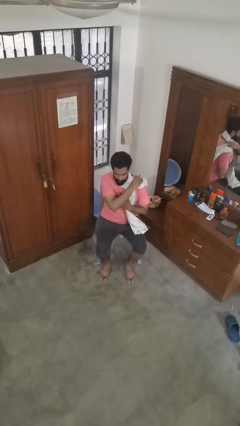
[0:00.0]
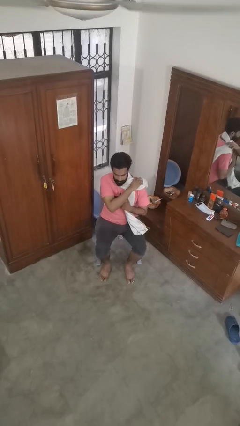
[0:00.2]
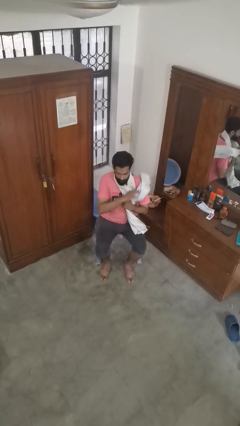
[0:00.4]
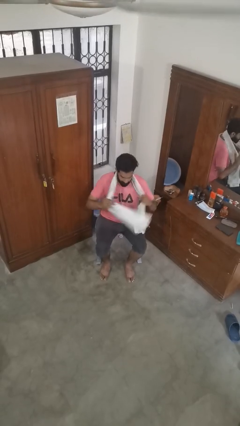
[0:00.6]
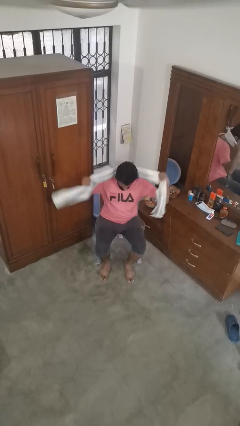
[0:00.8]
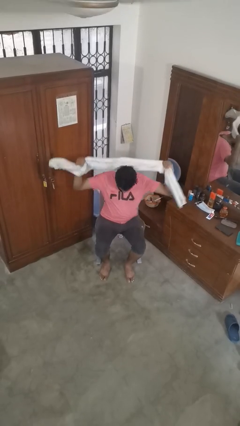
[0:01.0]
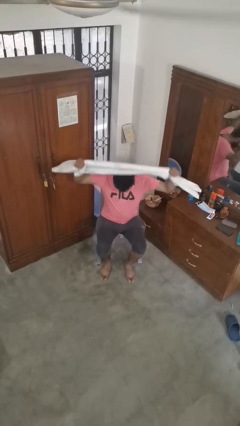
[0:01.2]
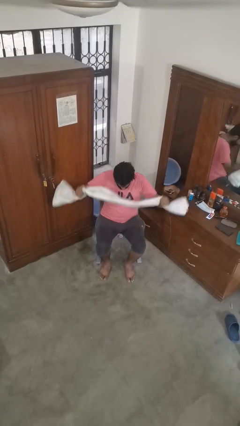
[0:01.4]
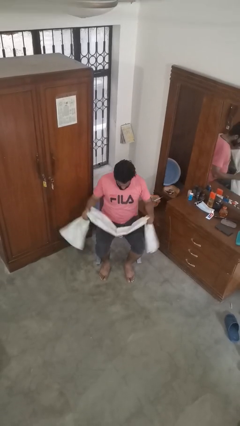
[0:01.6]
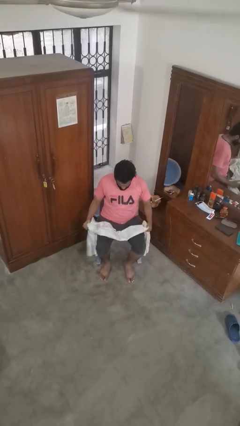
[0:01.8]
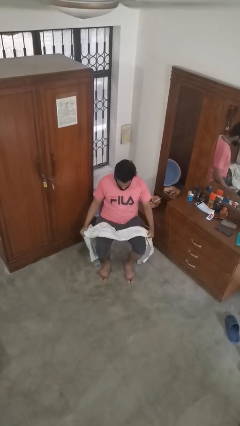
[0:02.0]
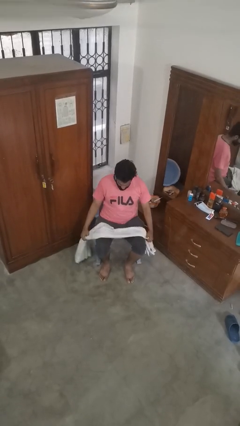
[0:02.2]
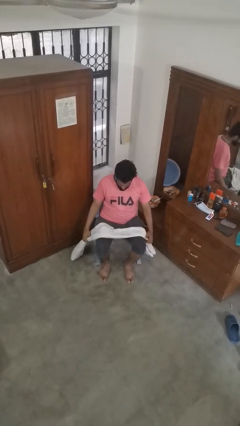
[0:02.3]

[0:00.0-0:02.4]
person takes off scarf

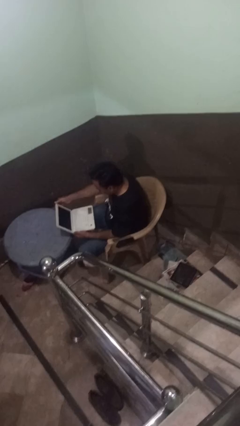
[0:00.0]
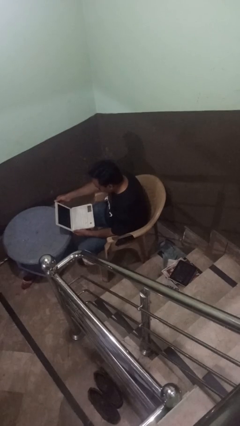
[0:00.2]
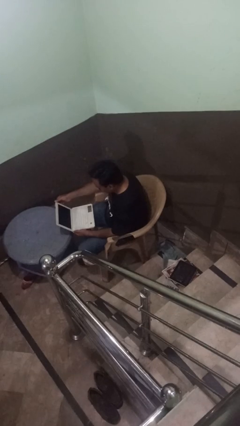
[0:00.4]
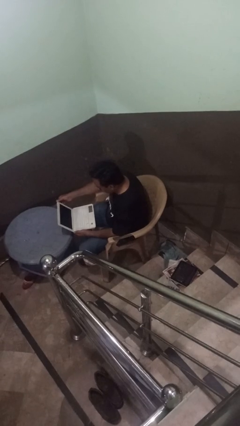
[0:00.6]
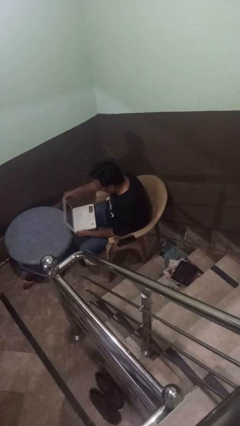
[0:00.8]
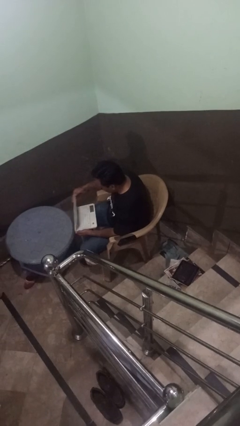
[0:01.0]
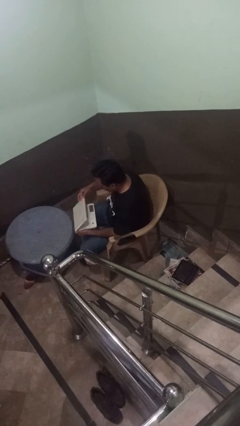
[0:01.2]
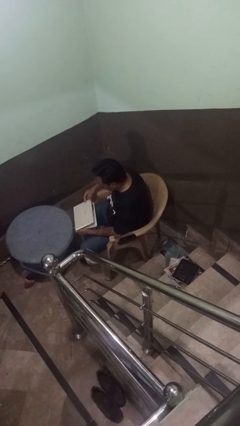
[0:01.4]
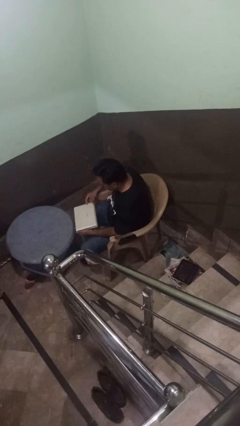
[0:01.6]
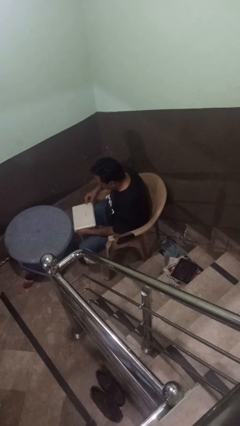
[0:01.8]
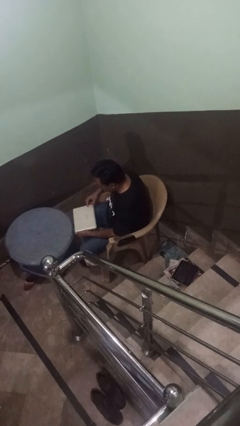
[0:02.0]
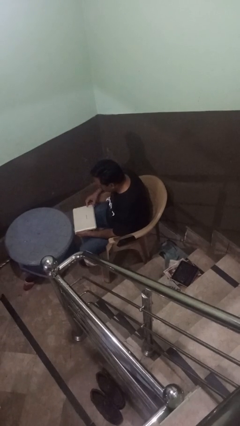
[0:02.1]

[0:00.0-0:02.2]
person closes laptop

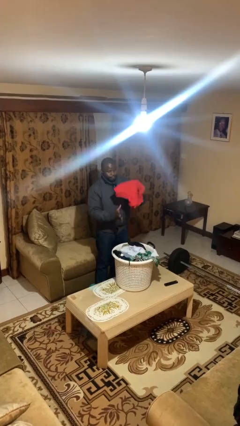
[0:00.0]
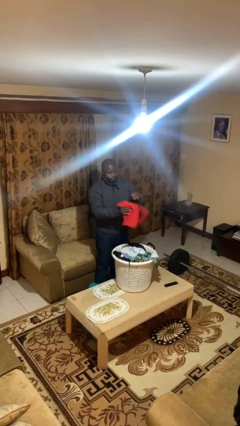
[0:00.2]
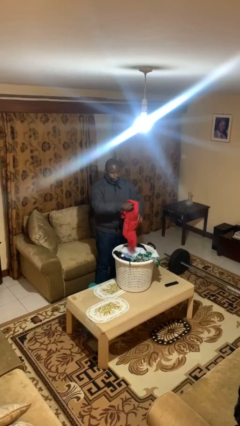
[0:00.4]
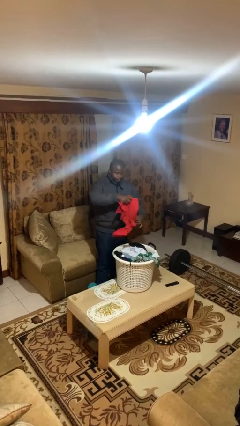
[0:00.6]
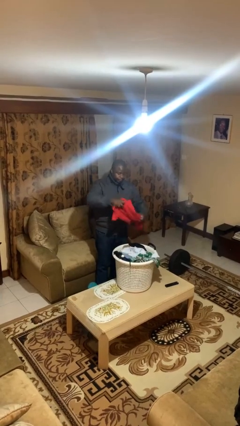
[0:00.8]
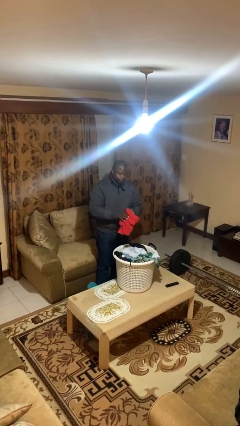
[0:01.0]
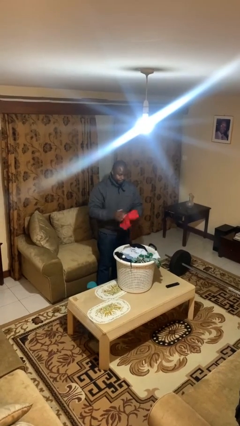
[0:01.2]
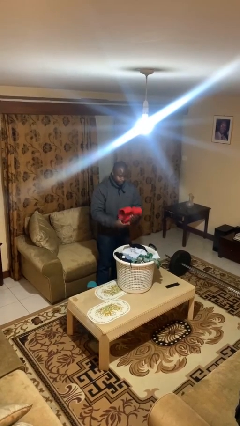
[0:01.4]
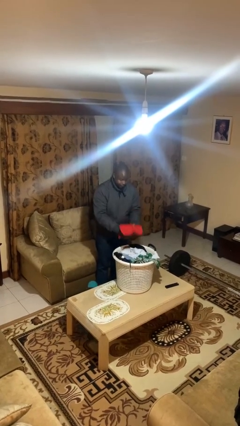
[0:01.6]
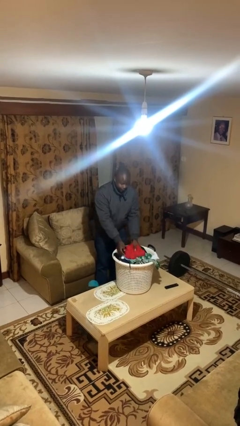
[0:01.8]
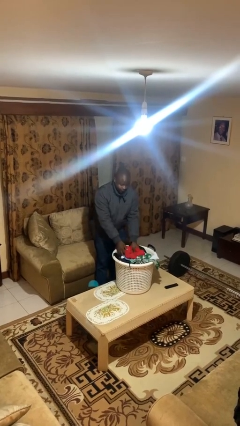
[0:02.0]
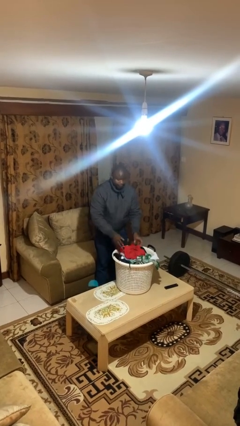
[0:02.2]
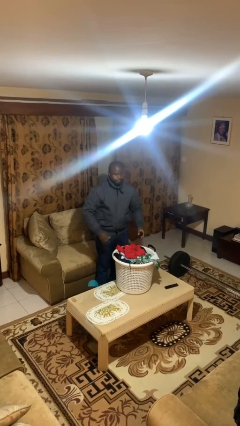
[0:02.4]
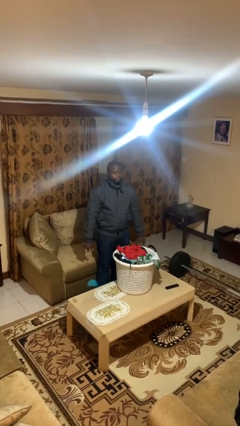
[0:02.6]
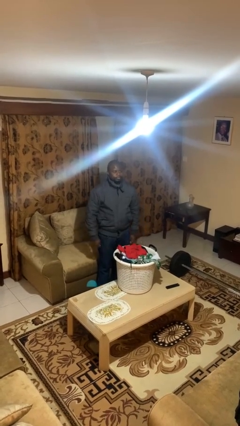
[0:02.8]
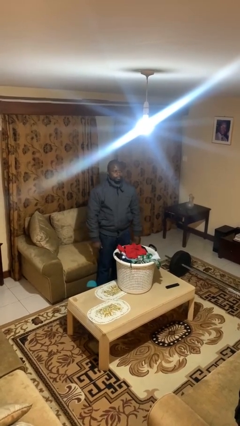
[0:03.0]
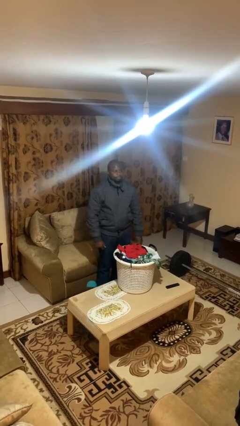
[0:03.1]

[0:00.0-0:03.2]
person folds shirt

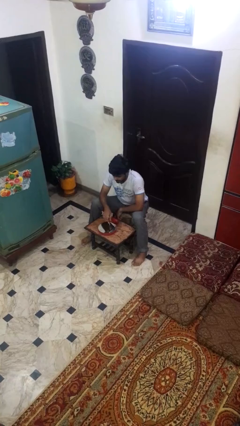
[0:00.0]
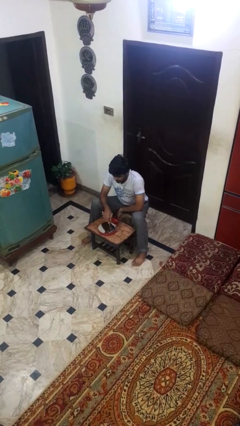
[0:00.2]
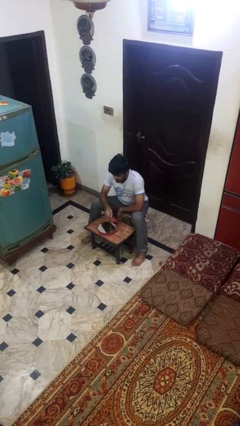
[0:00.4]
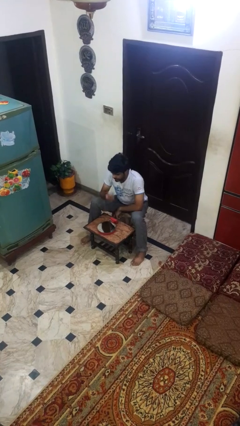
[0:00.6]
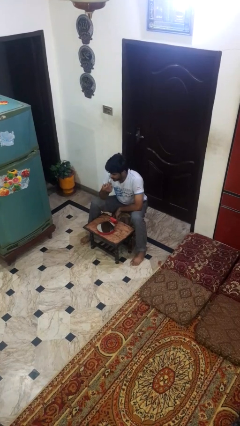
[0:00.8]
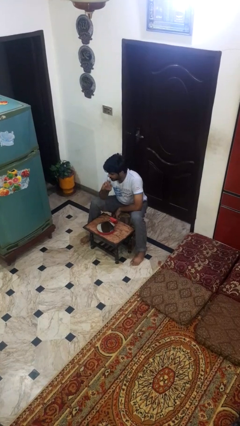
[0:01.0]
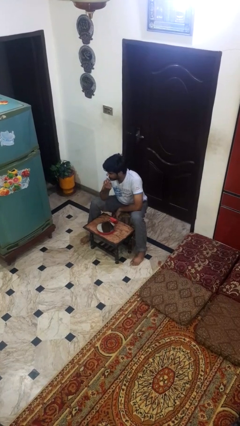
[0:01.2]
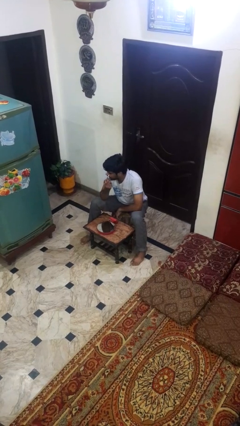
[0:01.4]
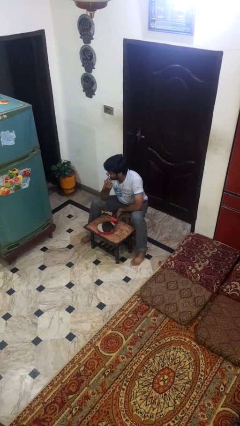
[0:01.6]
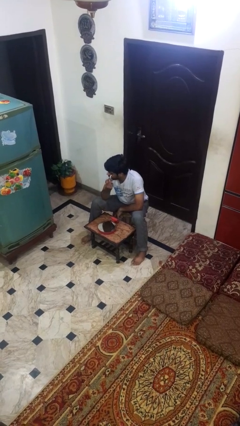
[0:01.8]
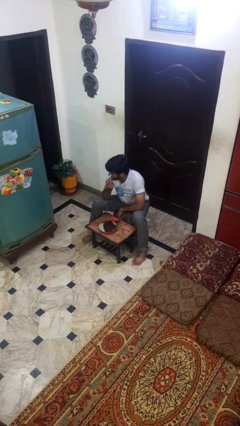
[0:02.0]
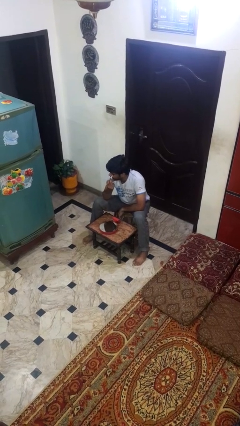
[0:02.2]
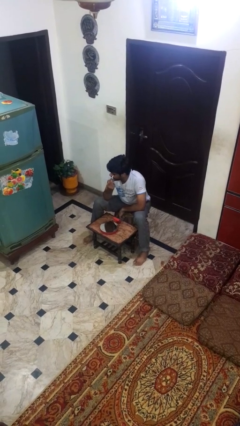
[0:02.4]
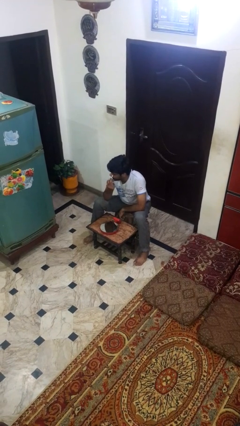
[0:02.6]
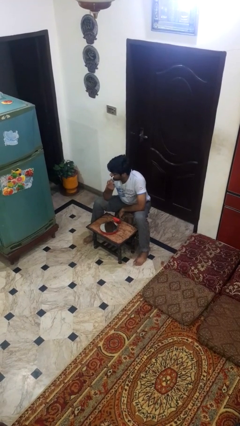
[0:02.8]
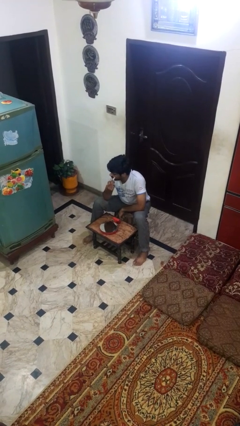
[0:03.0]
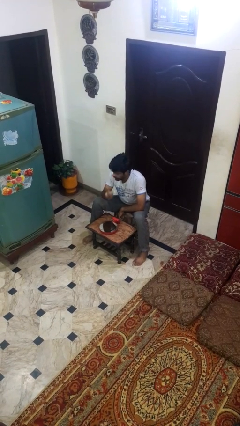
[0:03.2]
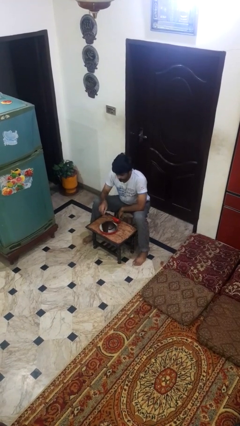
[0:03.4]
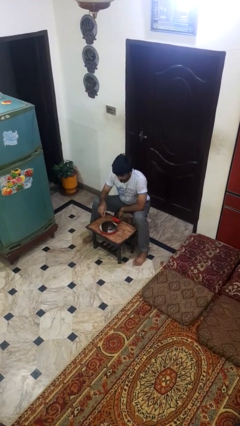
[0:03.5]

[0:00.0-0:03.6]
person applies eye makeup

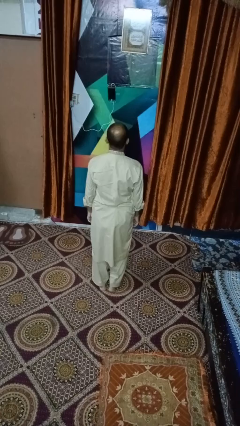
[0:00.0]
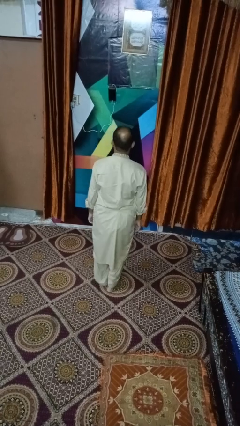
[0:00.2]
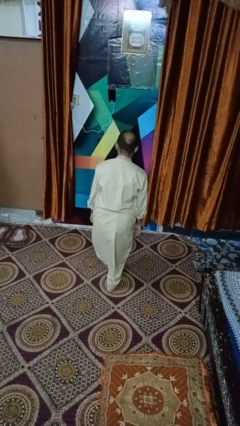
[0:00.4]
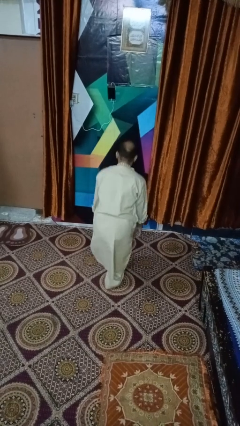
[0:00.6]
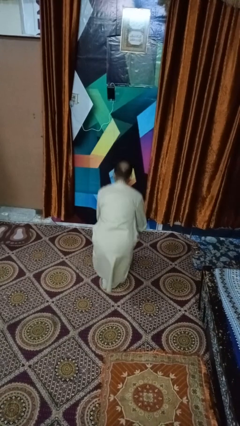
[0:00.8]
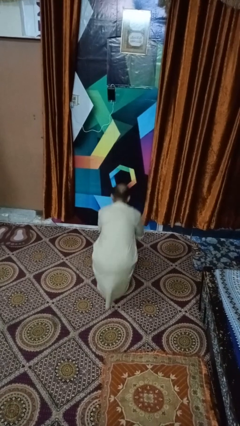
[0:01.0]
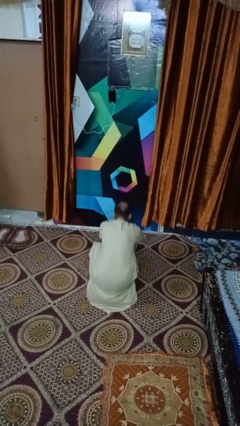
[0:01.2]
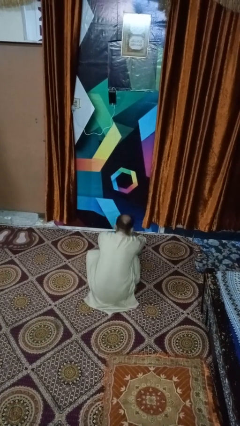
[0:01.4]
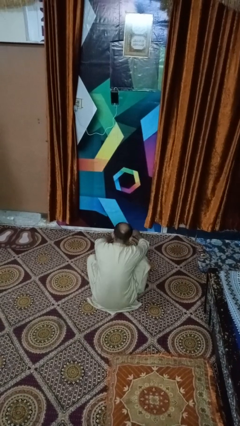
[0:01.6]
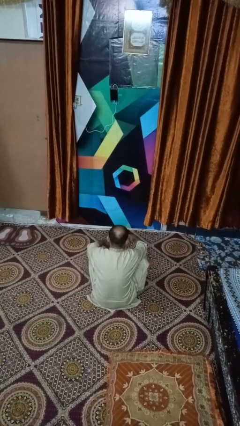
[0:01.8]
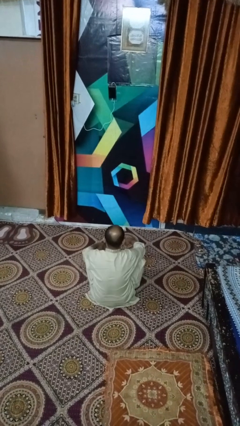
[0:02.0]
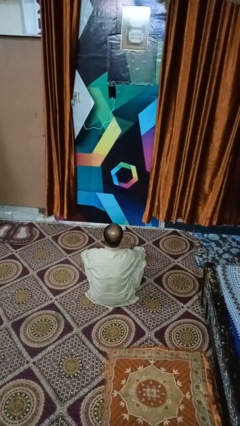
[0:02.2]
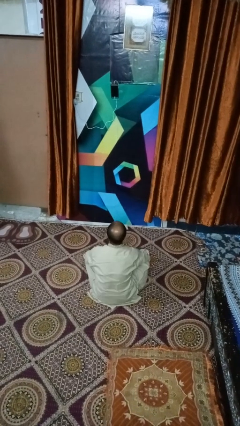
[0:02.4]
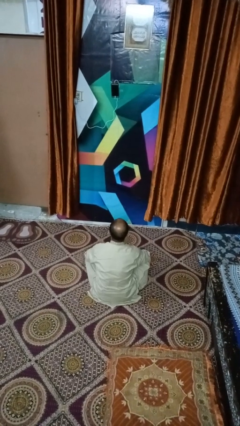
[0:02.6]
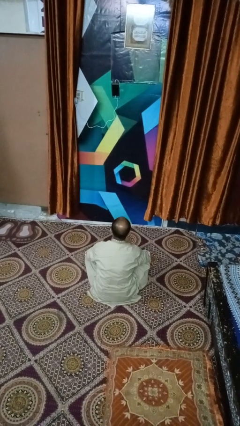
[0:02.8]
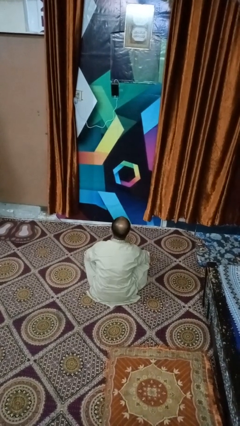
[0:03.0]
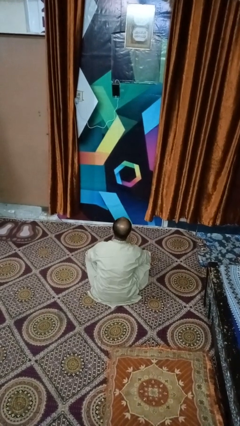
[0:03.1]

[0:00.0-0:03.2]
person sits crisscross

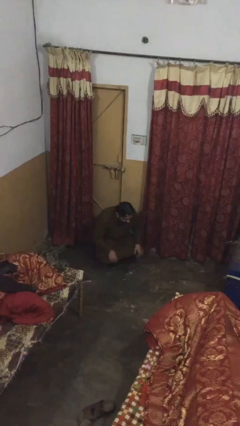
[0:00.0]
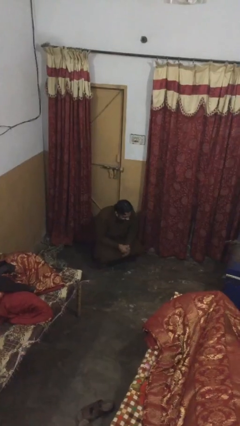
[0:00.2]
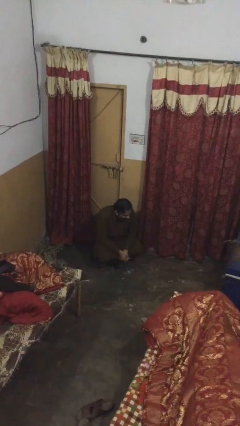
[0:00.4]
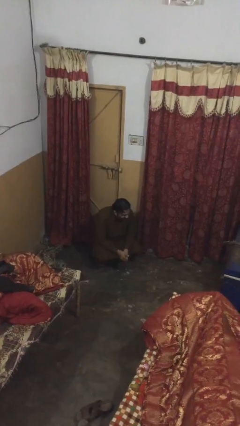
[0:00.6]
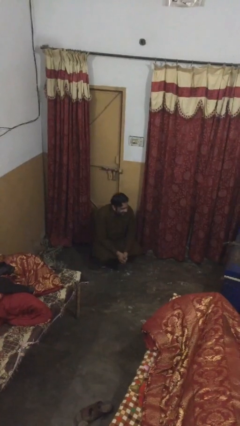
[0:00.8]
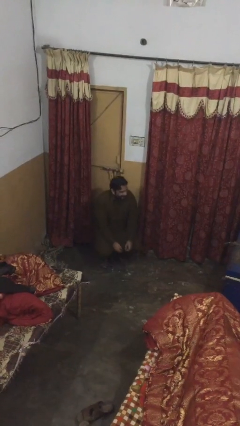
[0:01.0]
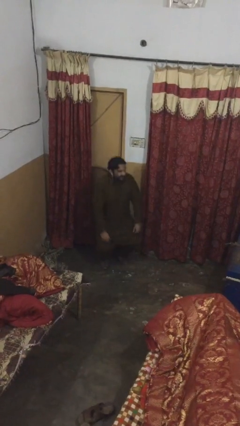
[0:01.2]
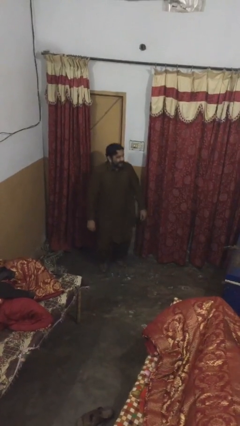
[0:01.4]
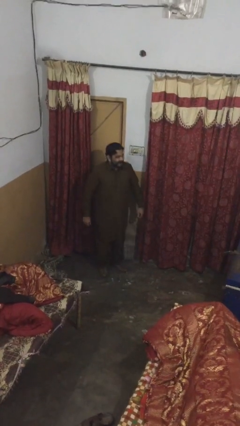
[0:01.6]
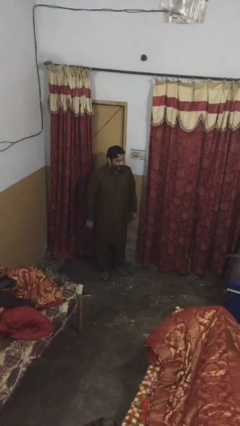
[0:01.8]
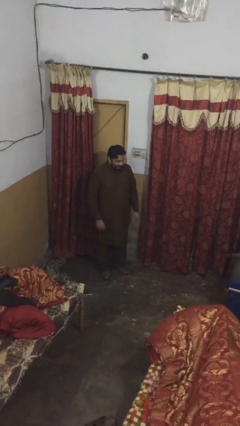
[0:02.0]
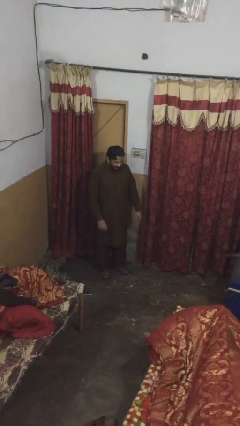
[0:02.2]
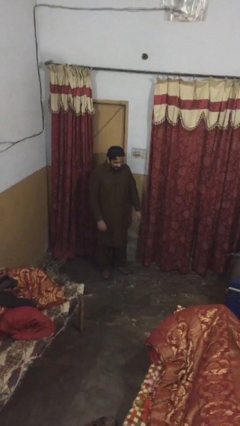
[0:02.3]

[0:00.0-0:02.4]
person stands up

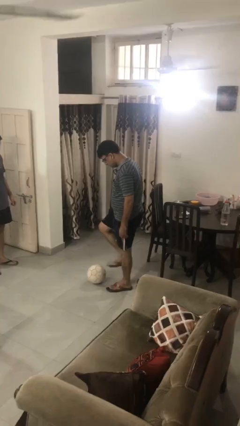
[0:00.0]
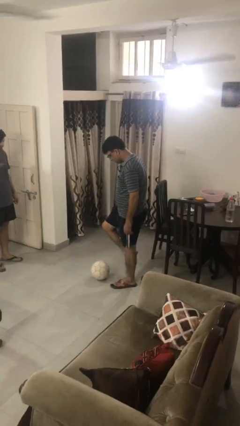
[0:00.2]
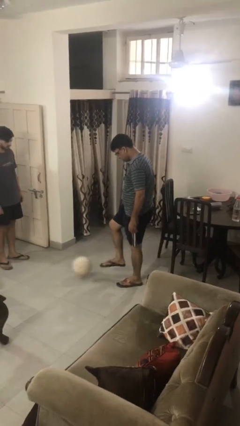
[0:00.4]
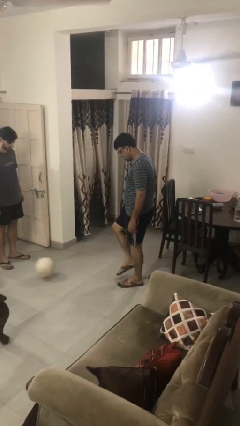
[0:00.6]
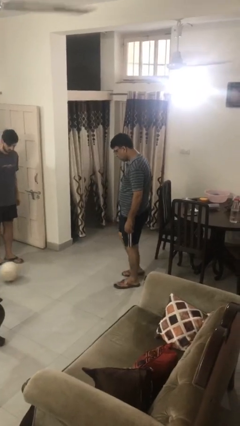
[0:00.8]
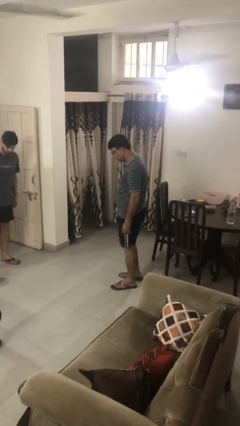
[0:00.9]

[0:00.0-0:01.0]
person kicks object to person
